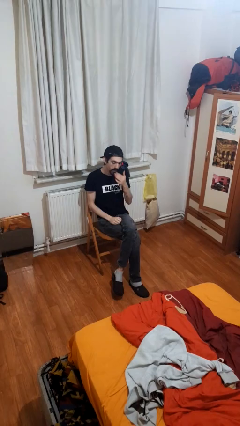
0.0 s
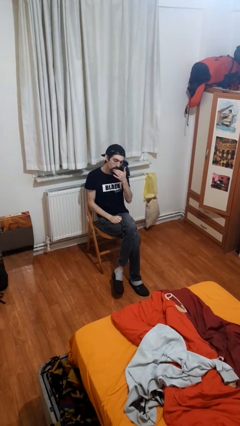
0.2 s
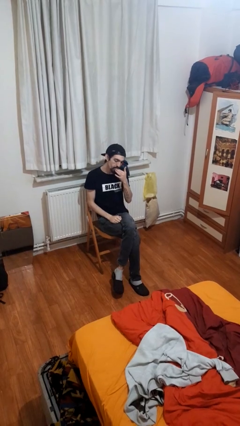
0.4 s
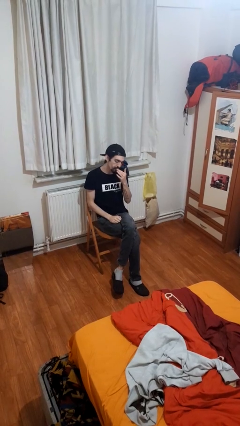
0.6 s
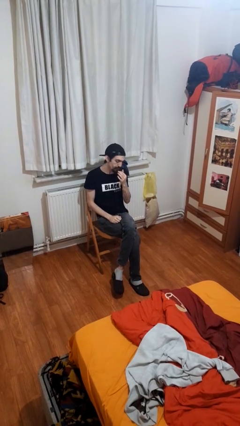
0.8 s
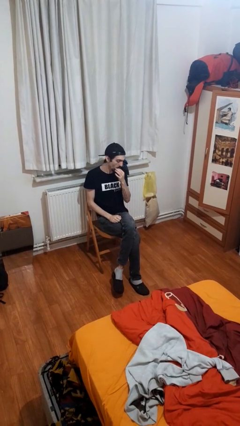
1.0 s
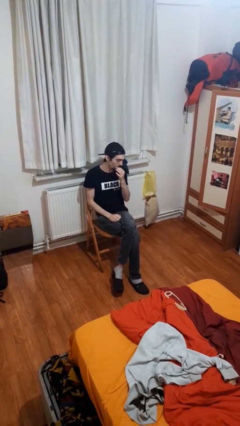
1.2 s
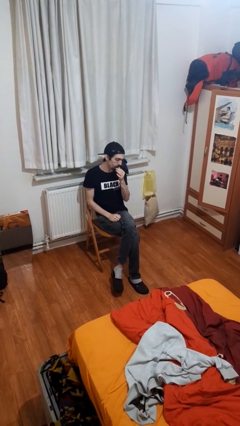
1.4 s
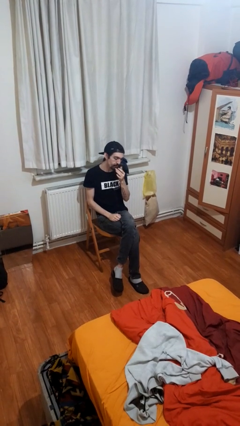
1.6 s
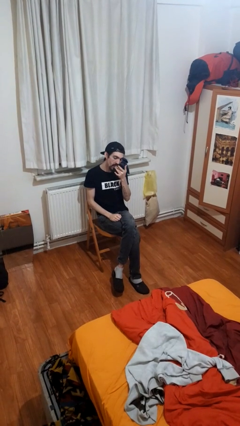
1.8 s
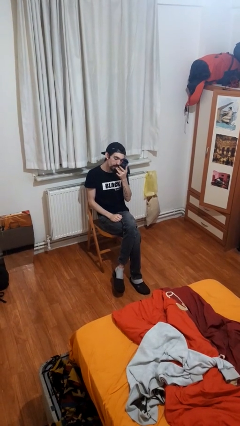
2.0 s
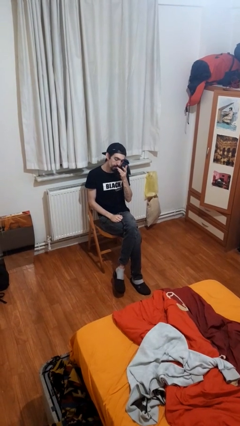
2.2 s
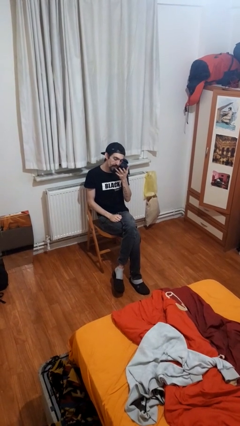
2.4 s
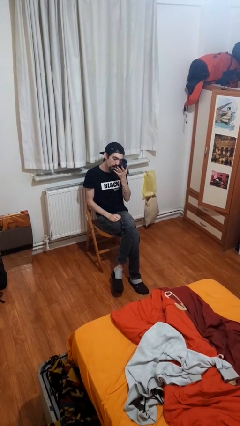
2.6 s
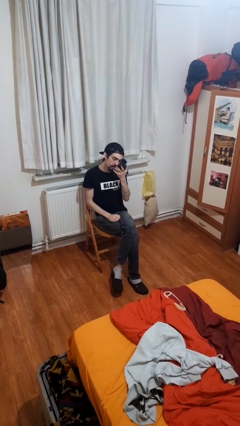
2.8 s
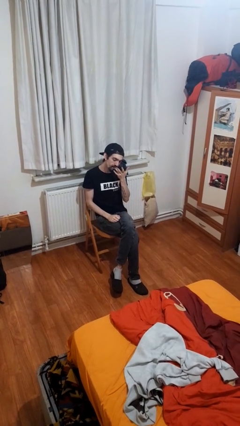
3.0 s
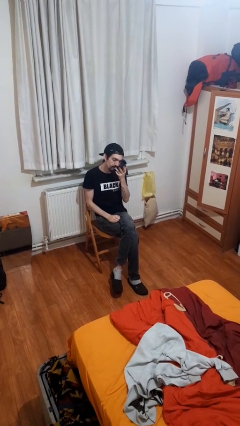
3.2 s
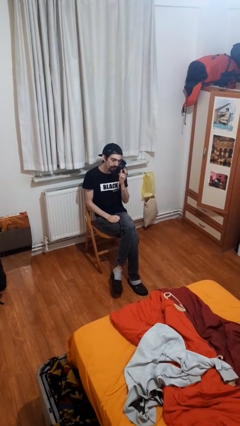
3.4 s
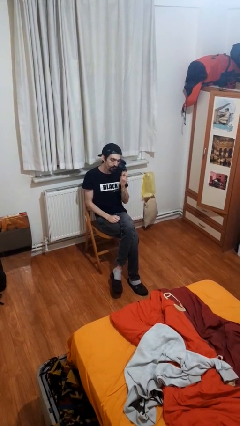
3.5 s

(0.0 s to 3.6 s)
person licks fingers

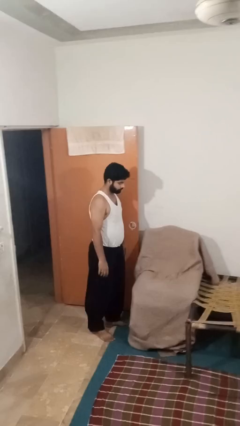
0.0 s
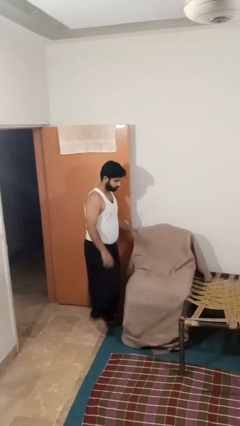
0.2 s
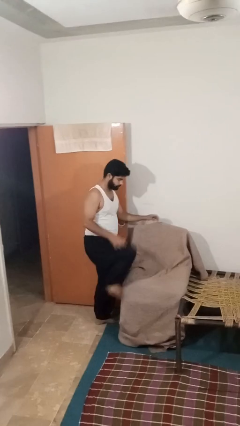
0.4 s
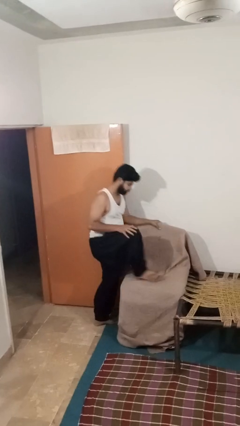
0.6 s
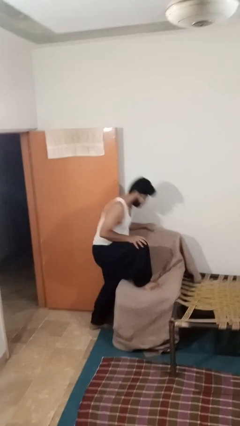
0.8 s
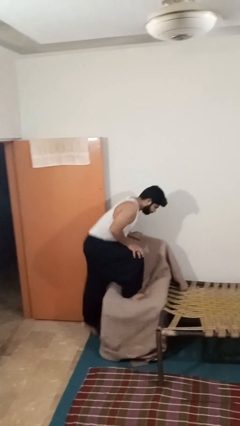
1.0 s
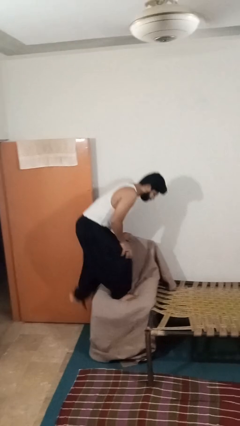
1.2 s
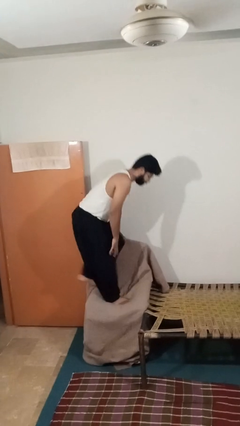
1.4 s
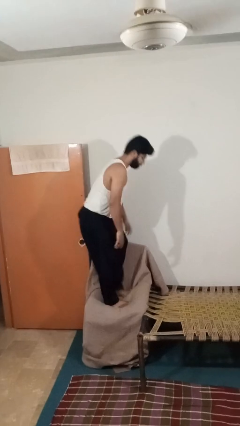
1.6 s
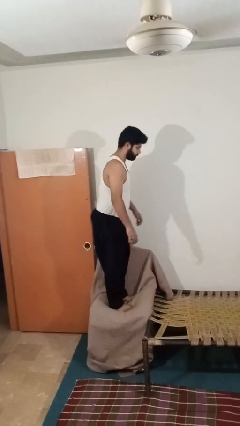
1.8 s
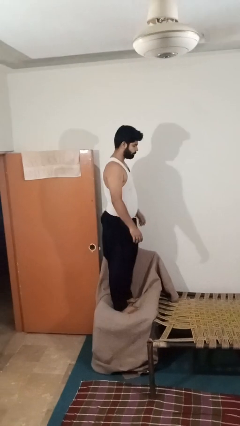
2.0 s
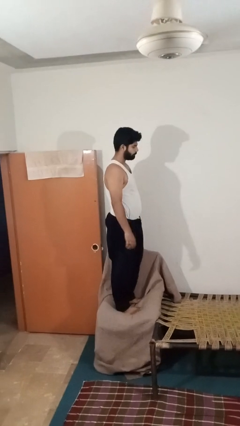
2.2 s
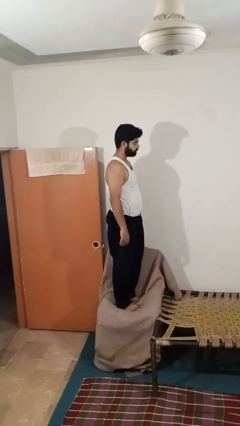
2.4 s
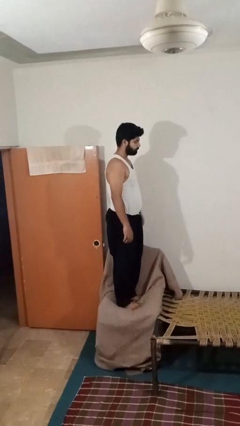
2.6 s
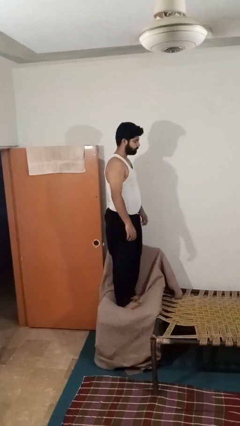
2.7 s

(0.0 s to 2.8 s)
person climbs on couch

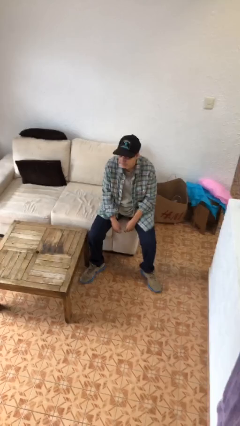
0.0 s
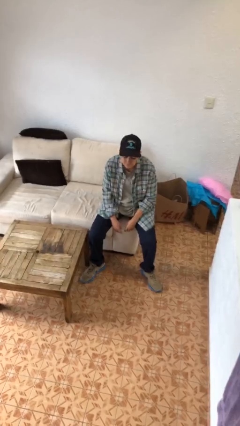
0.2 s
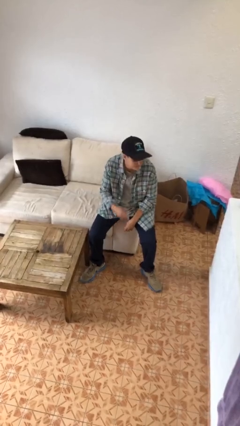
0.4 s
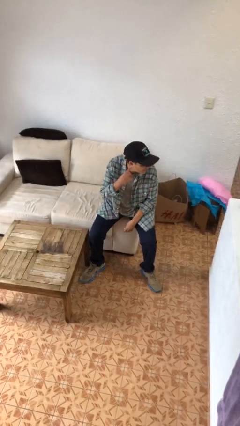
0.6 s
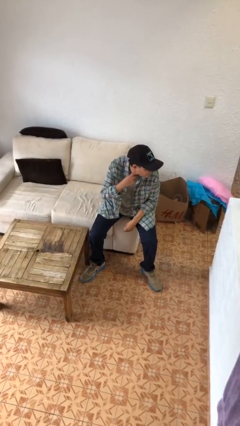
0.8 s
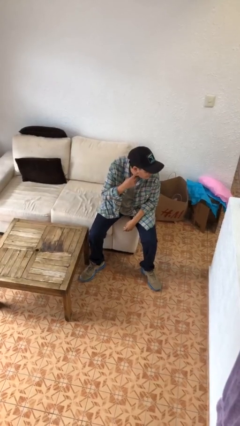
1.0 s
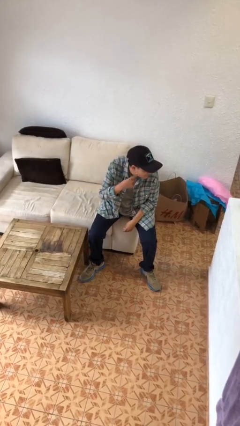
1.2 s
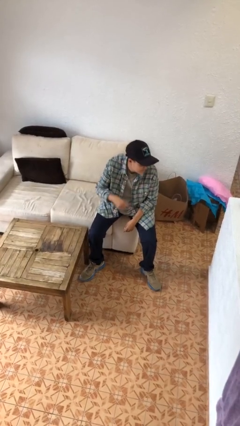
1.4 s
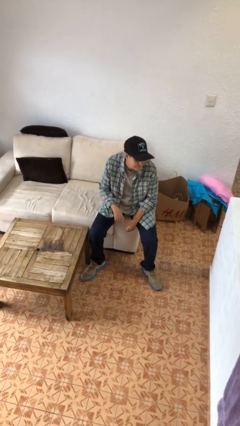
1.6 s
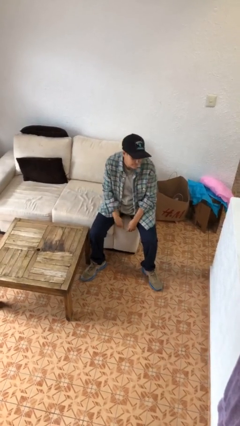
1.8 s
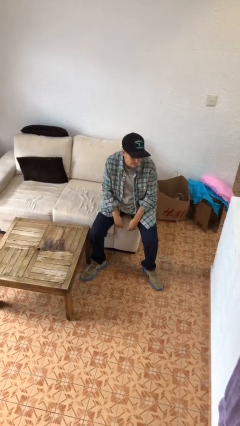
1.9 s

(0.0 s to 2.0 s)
person gestures listen closely

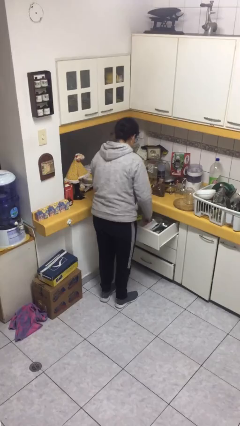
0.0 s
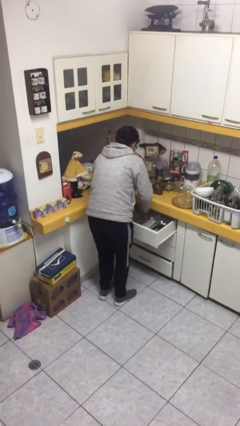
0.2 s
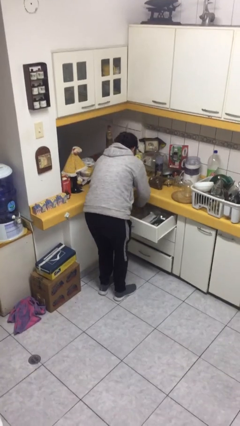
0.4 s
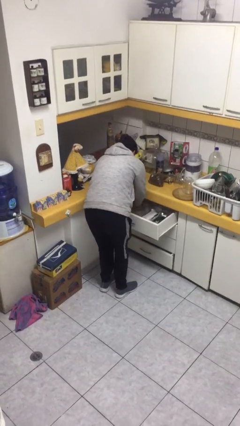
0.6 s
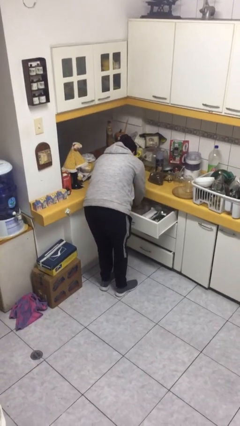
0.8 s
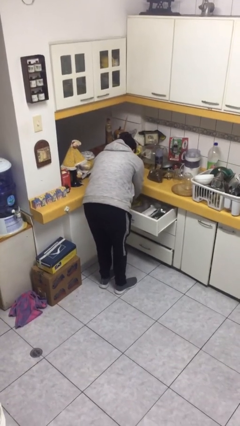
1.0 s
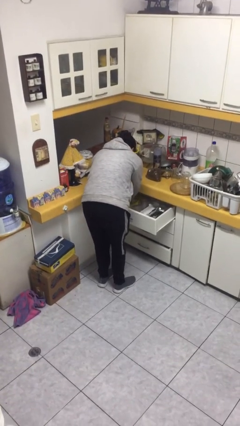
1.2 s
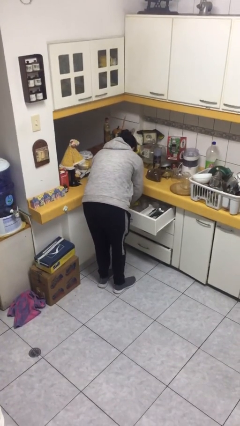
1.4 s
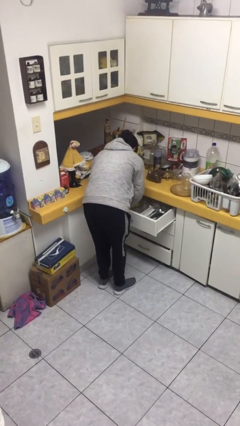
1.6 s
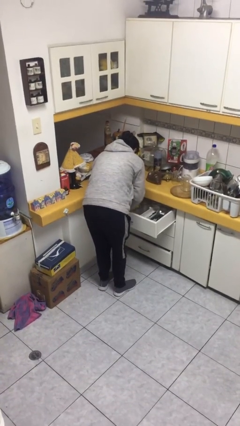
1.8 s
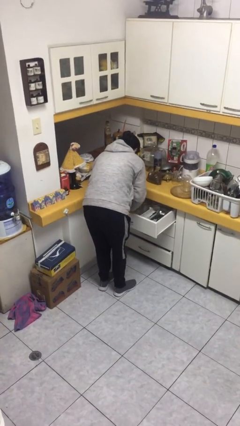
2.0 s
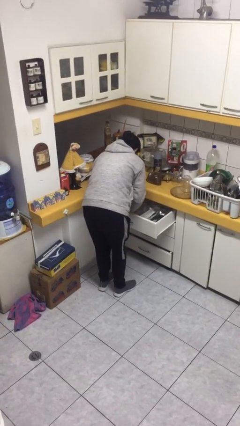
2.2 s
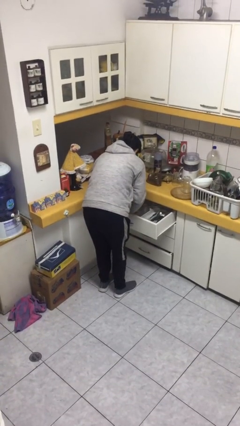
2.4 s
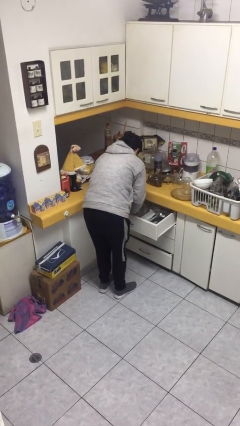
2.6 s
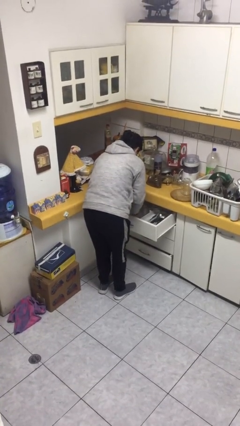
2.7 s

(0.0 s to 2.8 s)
person searches in kitchen drawer

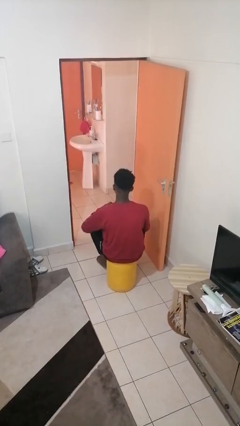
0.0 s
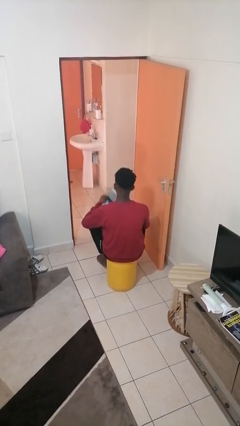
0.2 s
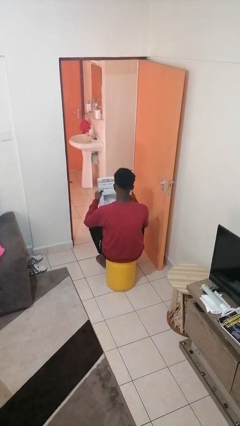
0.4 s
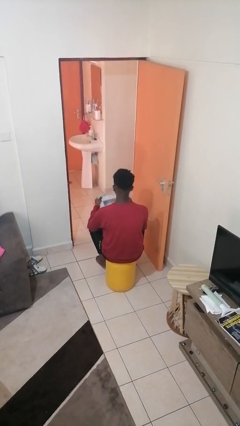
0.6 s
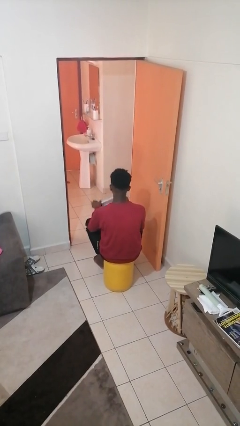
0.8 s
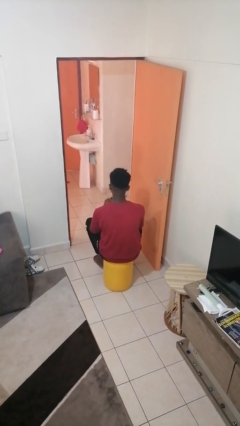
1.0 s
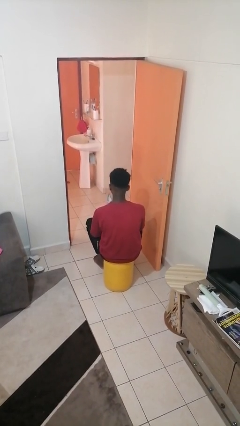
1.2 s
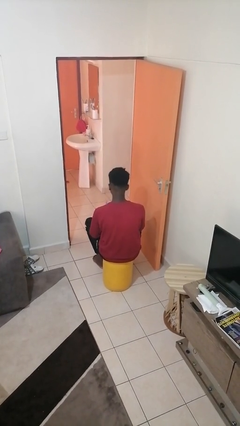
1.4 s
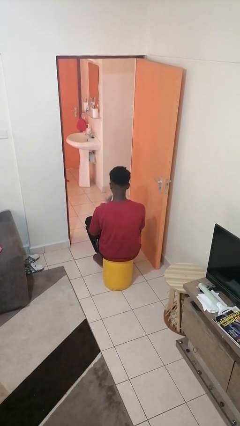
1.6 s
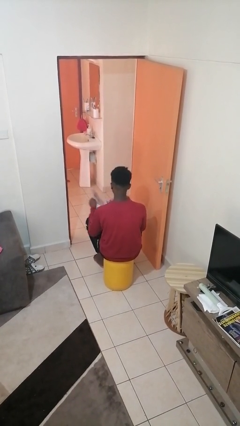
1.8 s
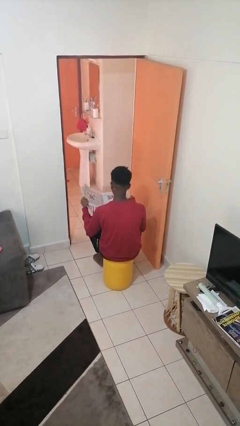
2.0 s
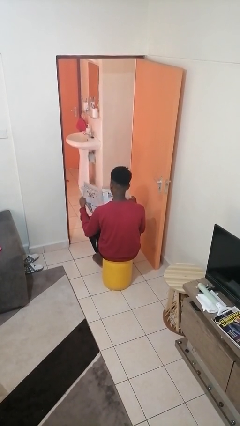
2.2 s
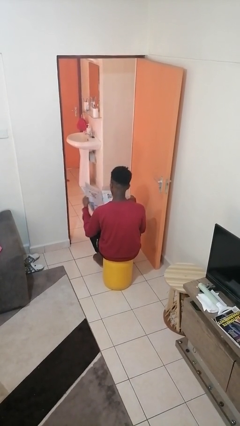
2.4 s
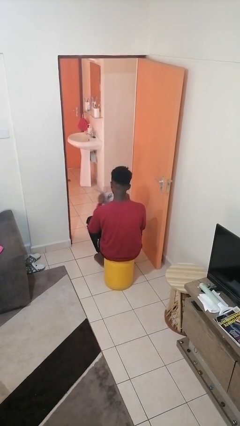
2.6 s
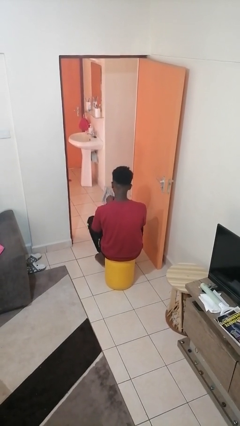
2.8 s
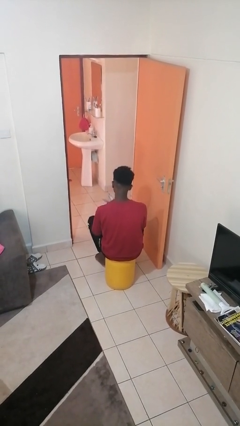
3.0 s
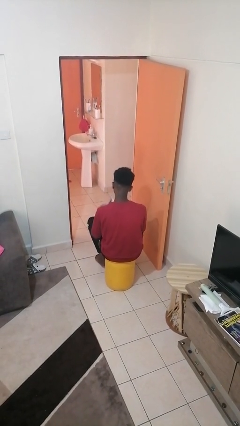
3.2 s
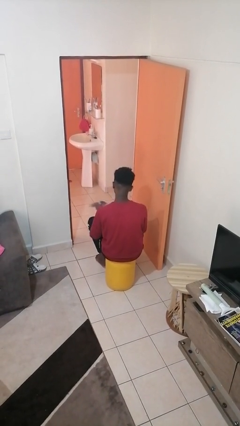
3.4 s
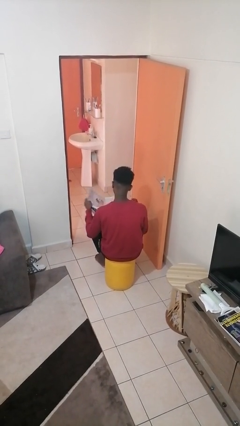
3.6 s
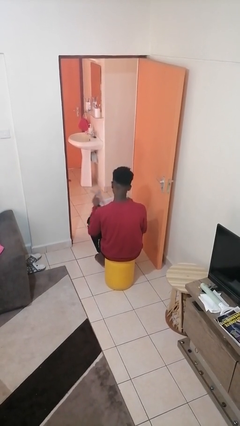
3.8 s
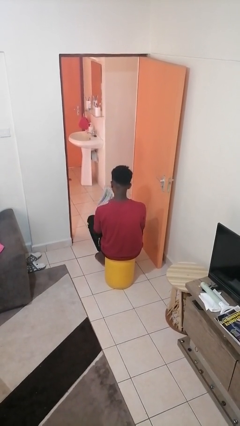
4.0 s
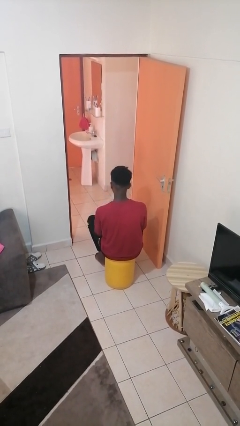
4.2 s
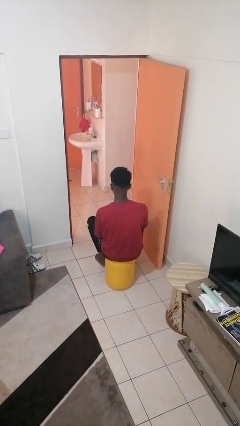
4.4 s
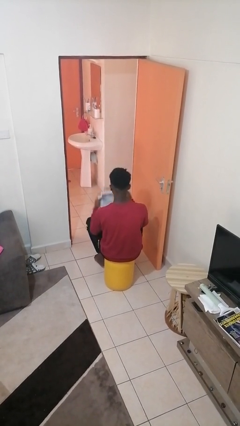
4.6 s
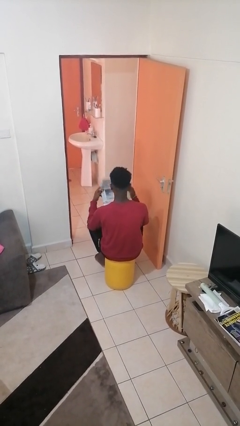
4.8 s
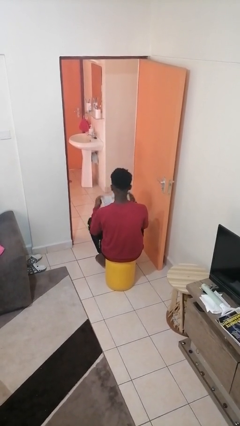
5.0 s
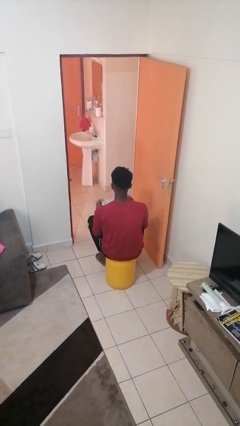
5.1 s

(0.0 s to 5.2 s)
person reads newspaper

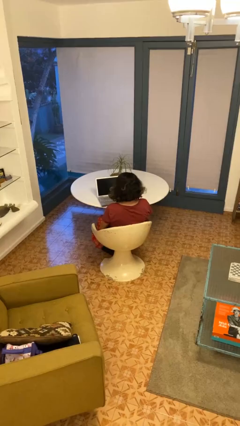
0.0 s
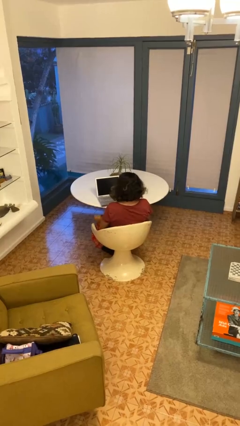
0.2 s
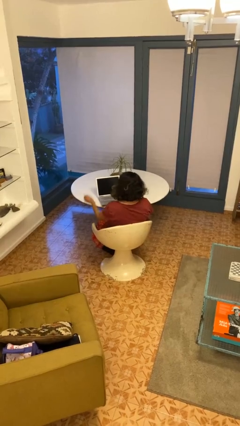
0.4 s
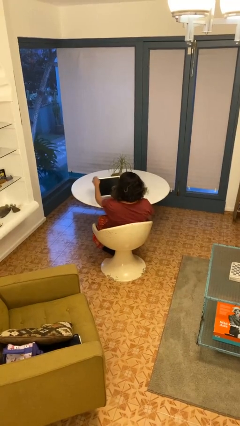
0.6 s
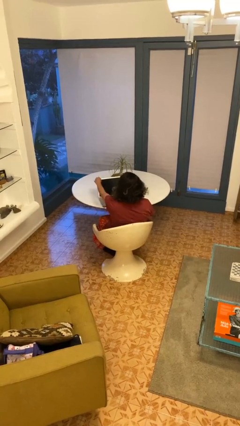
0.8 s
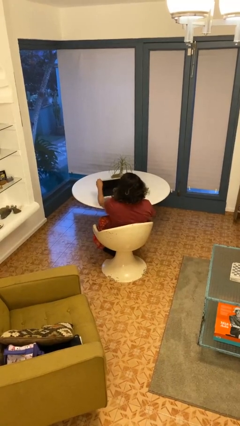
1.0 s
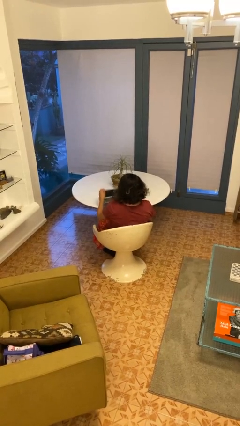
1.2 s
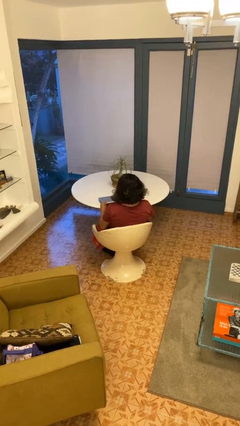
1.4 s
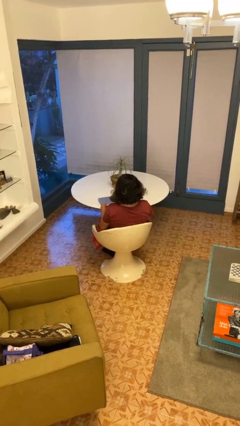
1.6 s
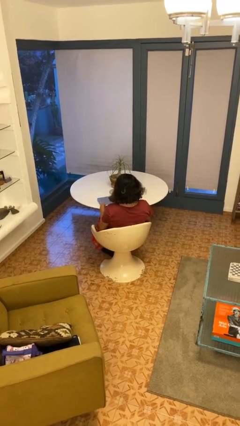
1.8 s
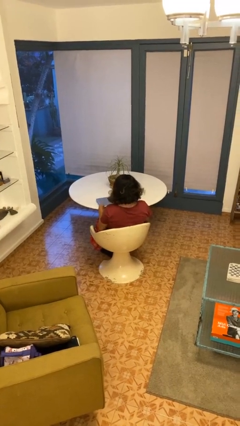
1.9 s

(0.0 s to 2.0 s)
person closes laptop
